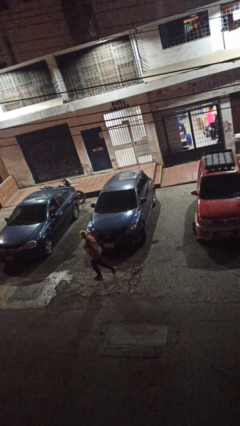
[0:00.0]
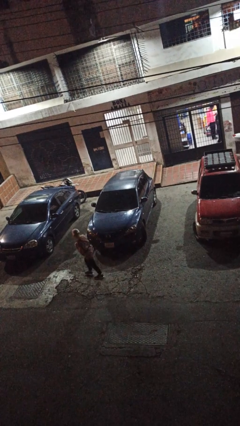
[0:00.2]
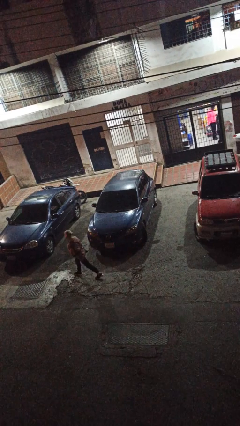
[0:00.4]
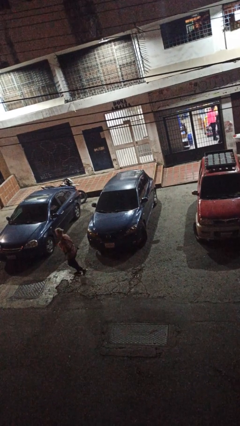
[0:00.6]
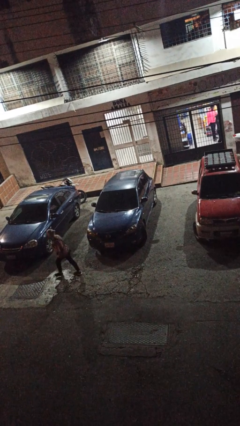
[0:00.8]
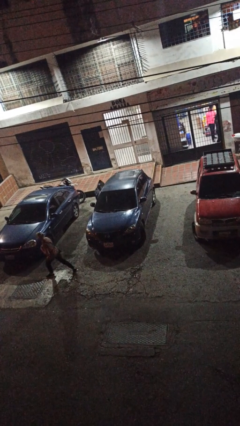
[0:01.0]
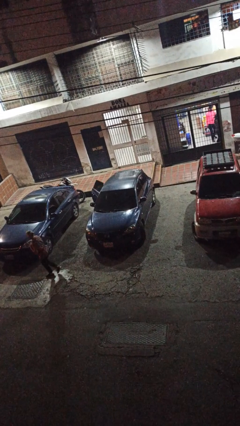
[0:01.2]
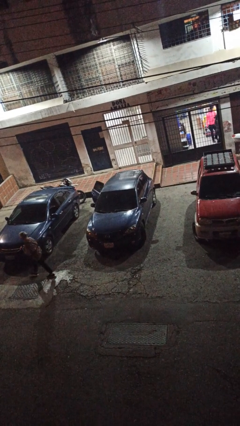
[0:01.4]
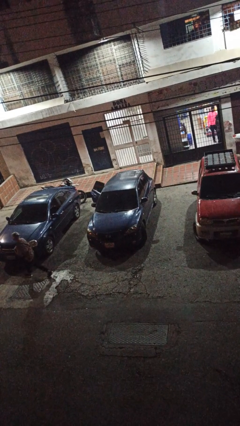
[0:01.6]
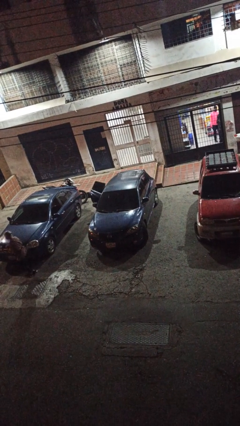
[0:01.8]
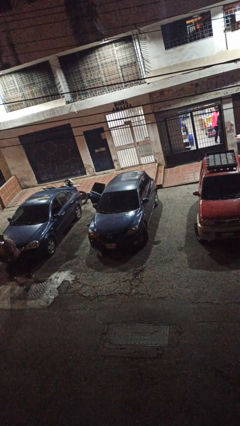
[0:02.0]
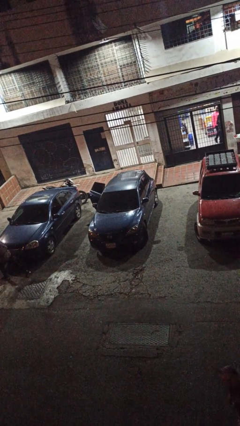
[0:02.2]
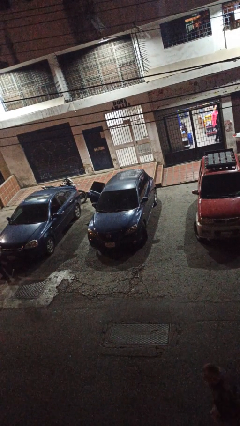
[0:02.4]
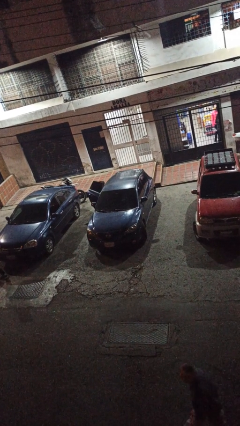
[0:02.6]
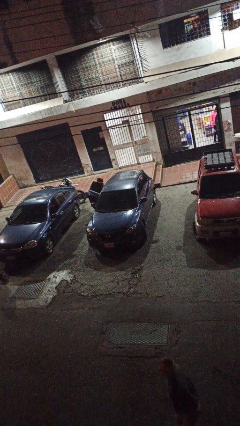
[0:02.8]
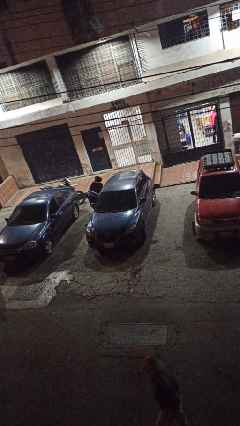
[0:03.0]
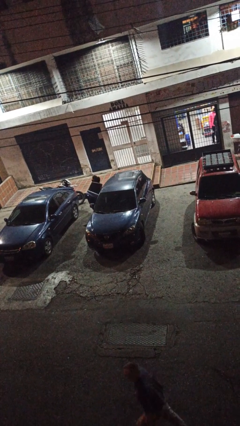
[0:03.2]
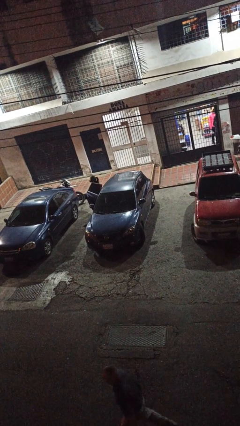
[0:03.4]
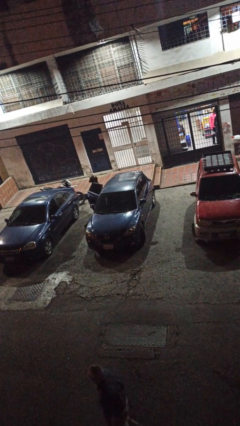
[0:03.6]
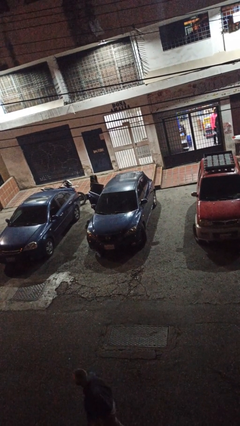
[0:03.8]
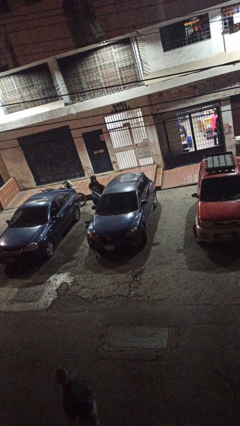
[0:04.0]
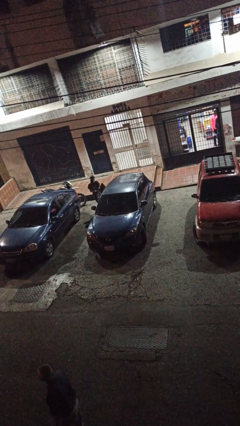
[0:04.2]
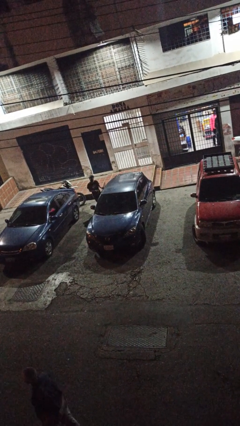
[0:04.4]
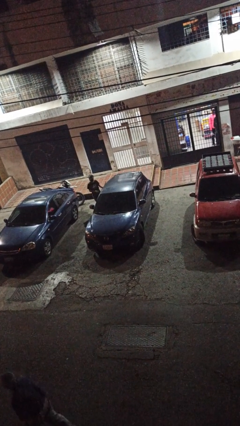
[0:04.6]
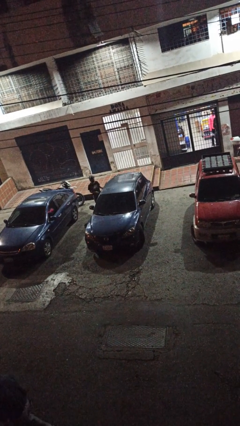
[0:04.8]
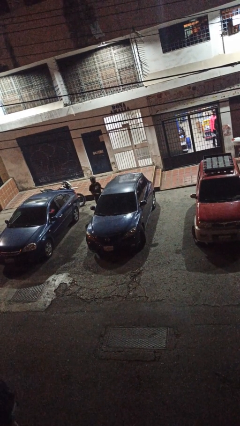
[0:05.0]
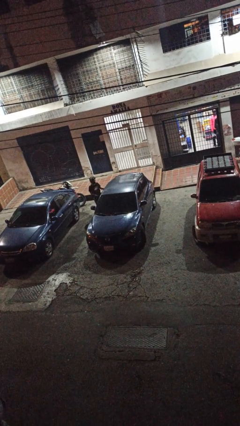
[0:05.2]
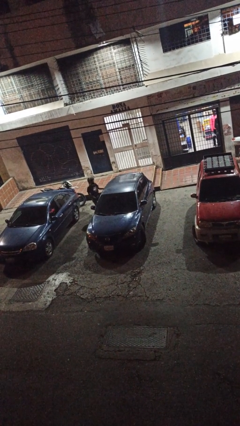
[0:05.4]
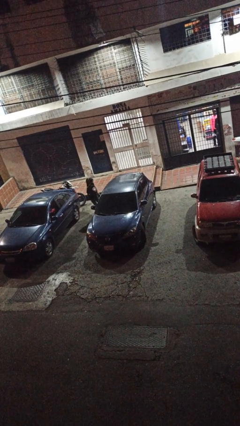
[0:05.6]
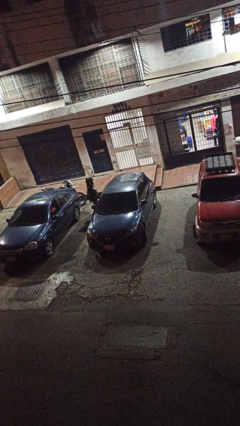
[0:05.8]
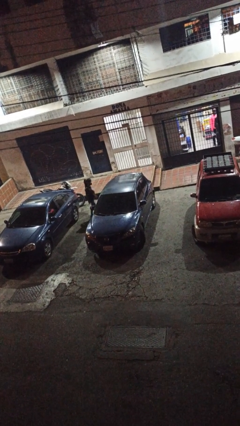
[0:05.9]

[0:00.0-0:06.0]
car drops off person

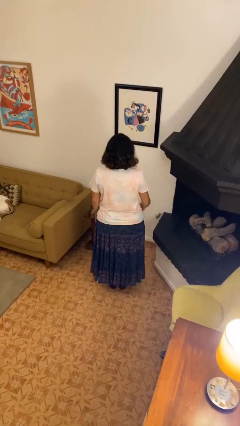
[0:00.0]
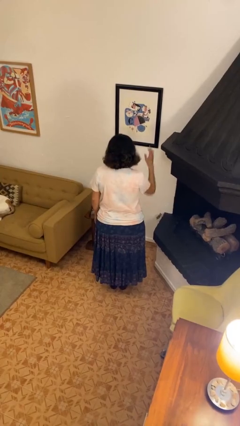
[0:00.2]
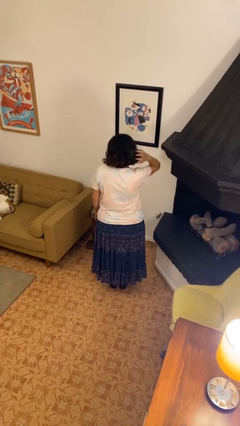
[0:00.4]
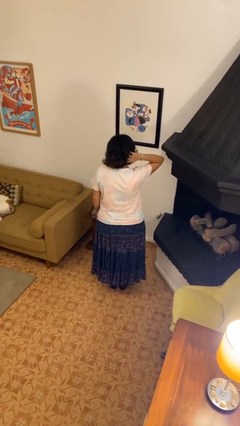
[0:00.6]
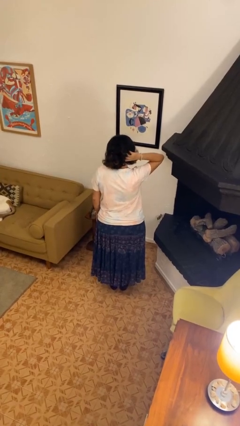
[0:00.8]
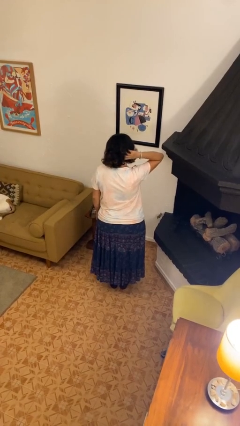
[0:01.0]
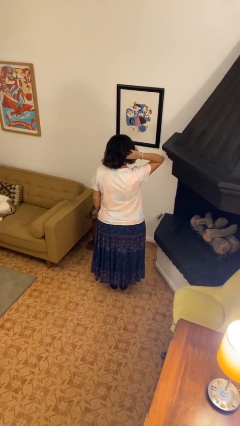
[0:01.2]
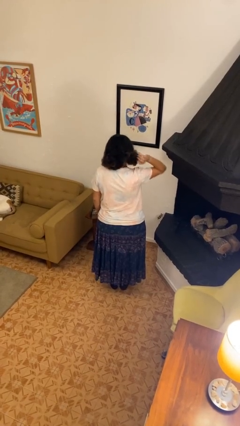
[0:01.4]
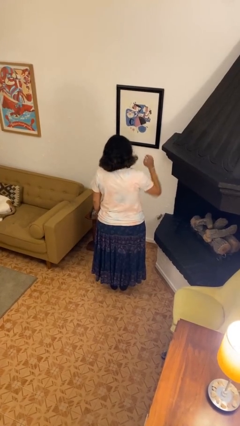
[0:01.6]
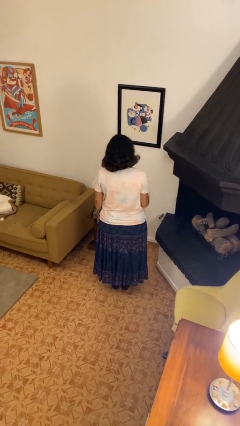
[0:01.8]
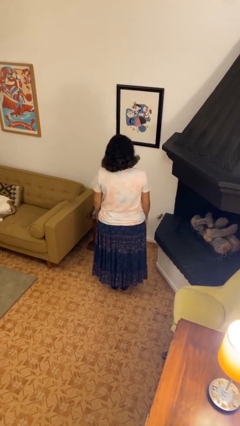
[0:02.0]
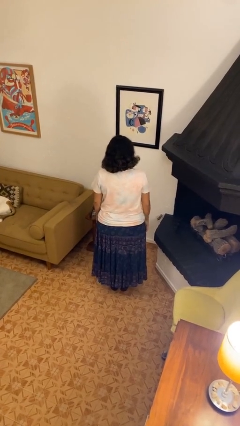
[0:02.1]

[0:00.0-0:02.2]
person scratches face

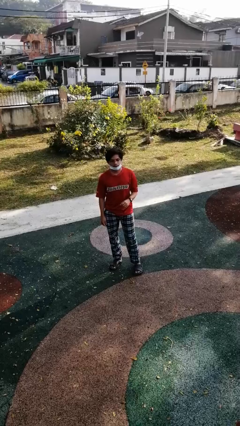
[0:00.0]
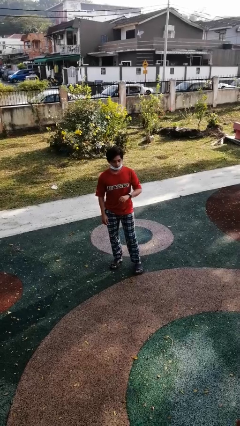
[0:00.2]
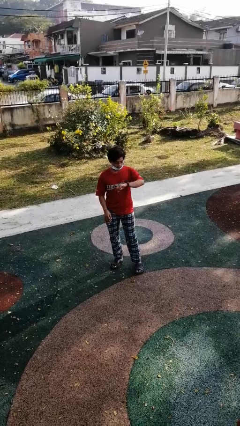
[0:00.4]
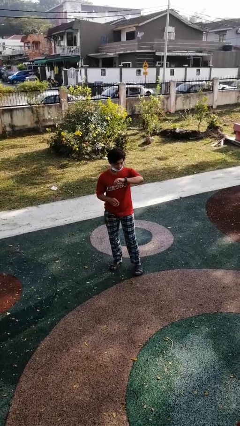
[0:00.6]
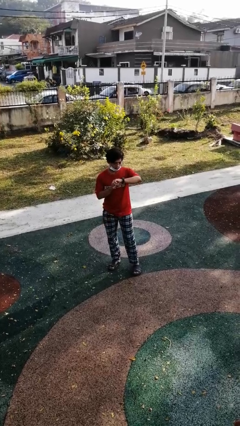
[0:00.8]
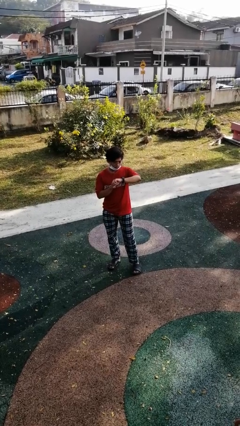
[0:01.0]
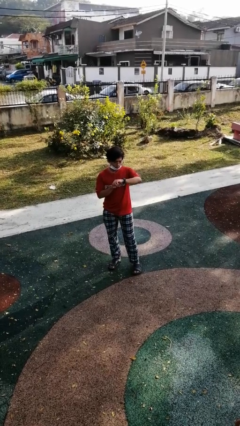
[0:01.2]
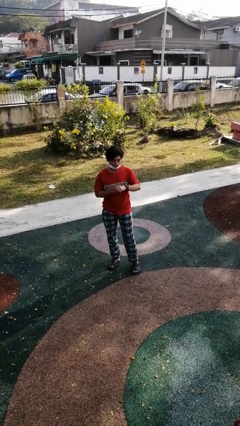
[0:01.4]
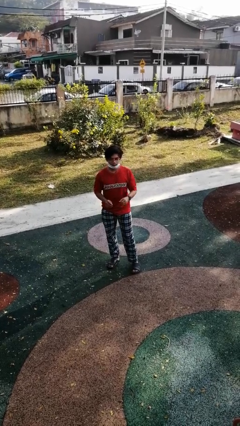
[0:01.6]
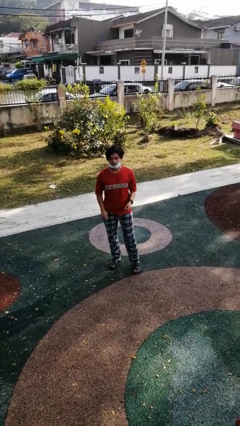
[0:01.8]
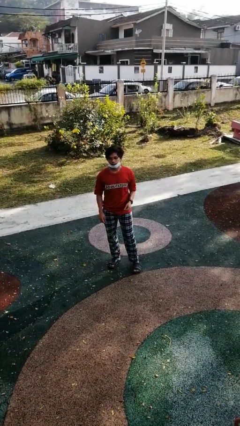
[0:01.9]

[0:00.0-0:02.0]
person looks at wristwatch

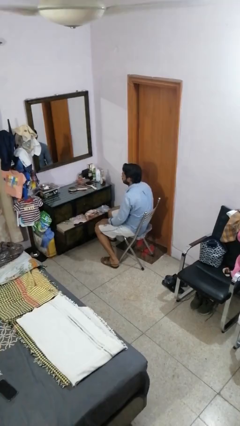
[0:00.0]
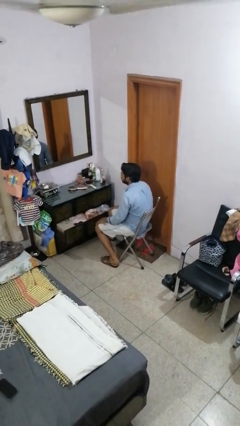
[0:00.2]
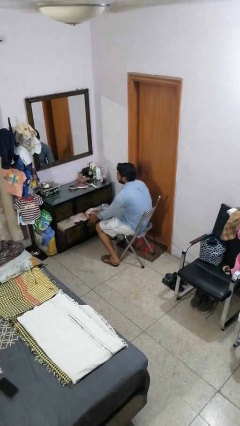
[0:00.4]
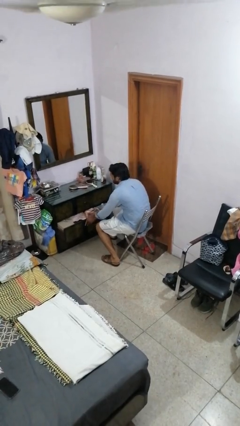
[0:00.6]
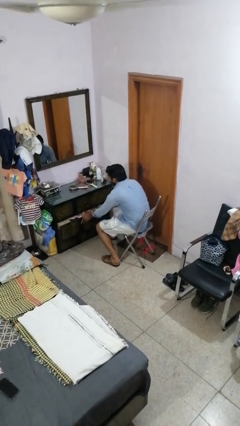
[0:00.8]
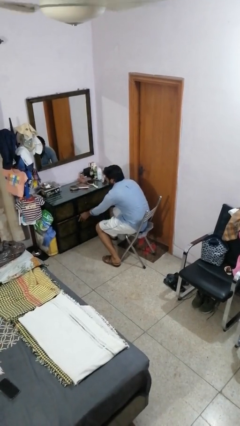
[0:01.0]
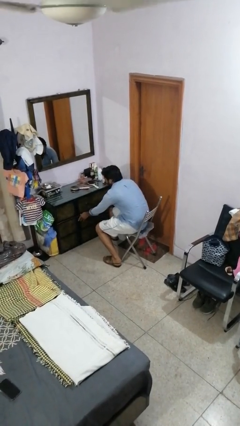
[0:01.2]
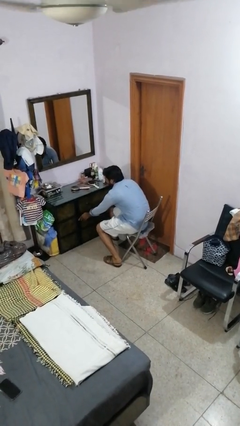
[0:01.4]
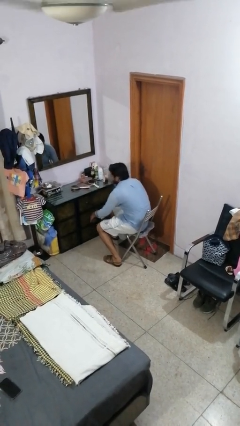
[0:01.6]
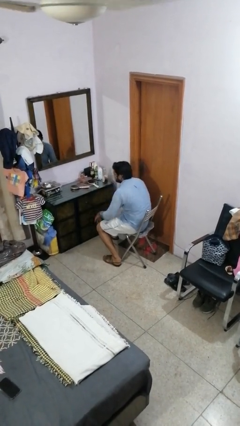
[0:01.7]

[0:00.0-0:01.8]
person closes dresser drawer

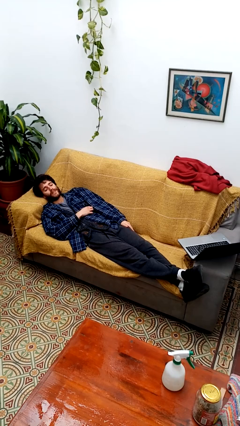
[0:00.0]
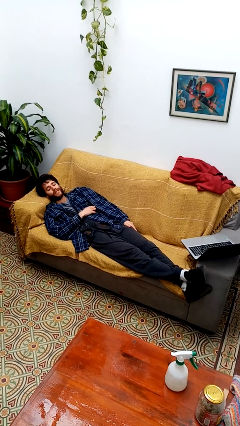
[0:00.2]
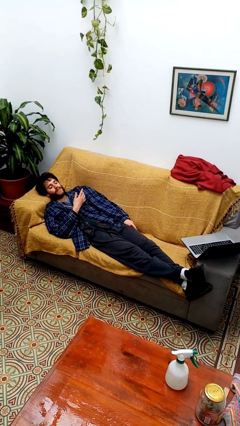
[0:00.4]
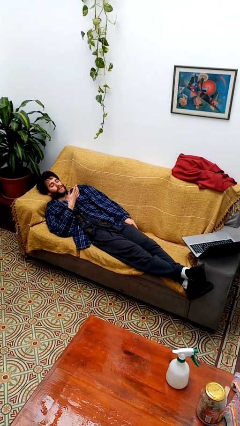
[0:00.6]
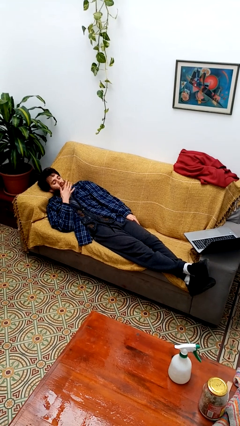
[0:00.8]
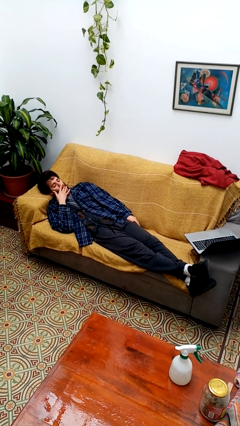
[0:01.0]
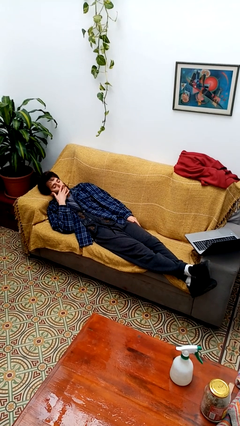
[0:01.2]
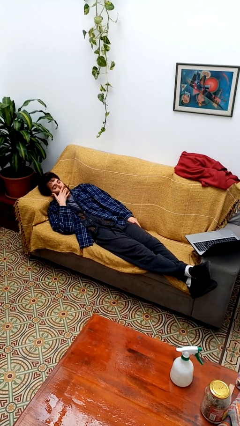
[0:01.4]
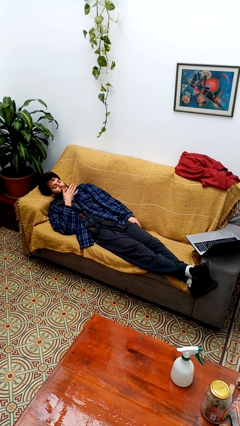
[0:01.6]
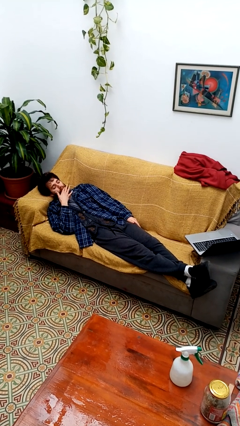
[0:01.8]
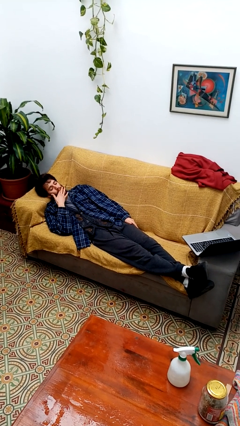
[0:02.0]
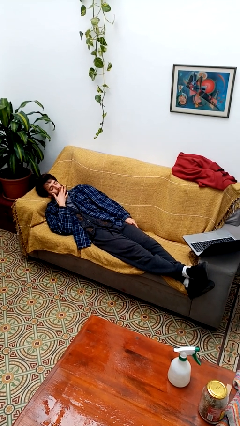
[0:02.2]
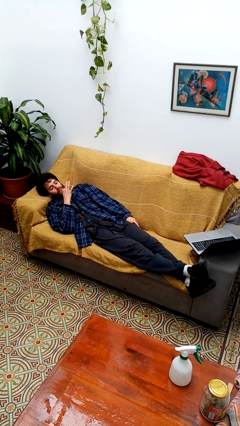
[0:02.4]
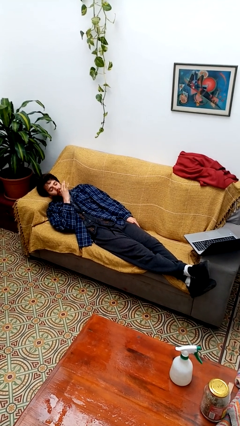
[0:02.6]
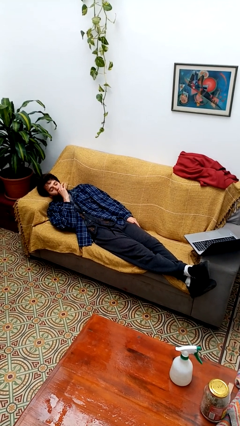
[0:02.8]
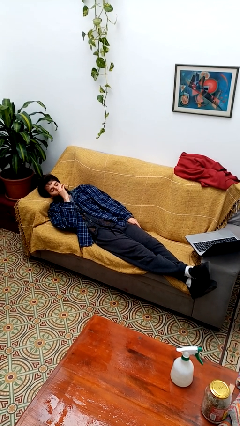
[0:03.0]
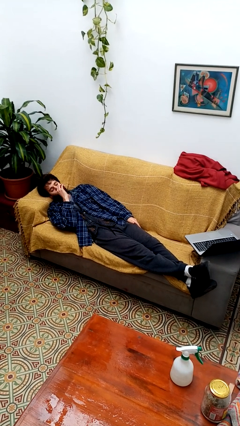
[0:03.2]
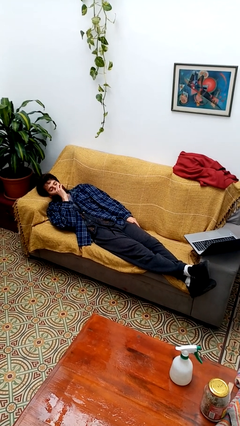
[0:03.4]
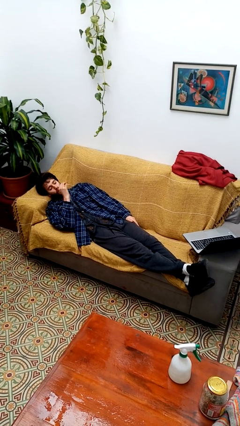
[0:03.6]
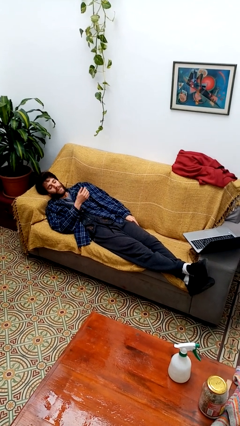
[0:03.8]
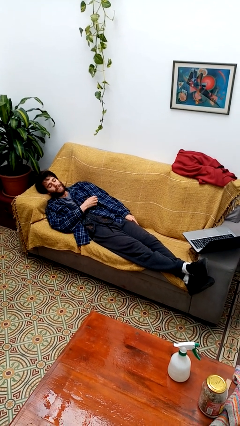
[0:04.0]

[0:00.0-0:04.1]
person licks fingers

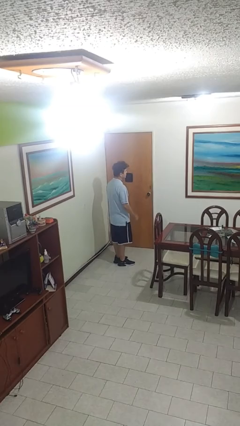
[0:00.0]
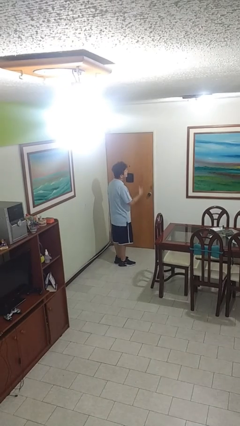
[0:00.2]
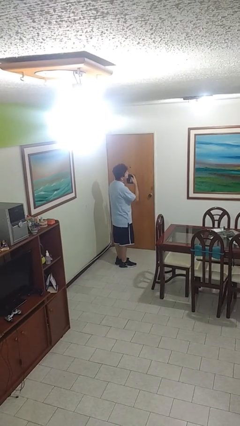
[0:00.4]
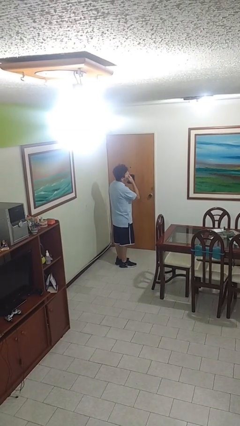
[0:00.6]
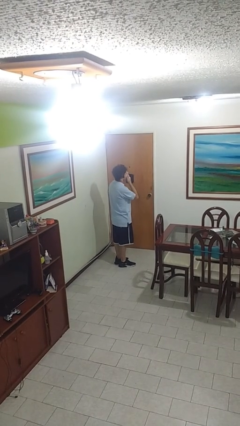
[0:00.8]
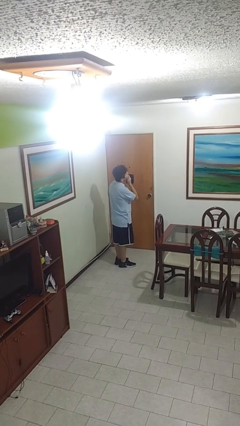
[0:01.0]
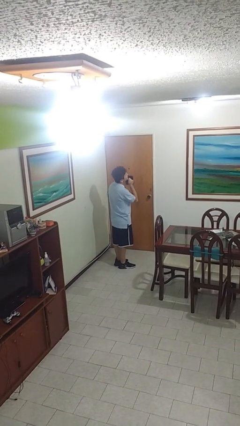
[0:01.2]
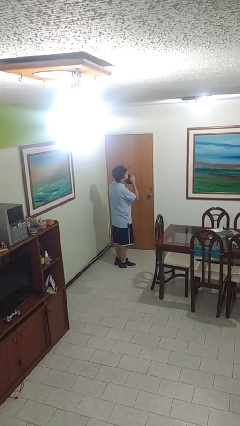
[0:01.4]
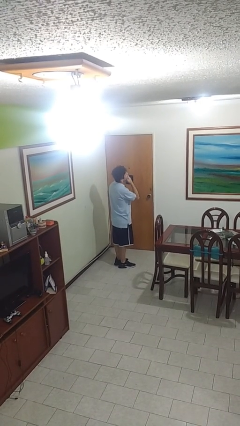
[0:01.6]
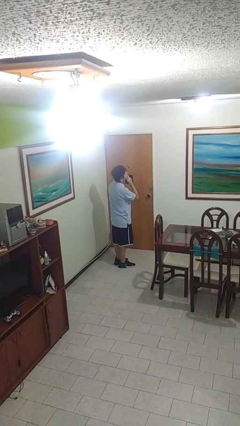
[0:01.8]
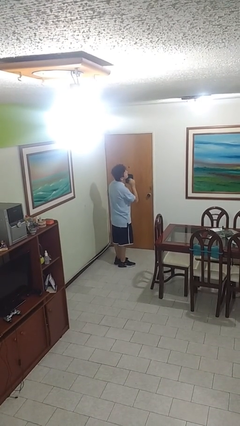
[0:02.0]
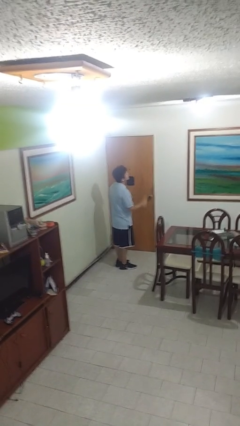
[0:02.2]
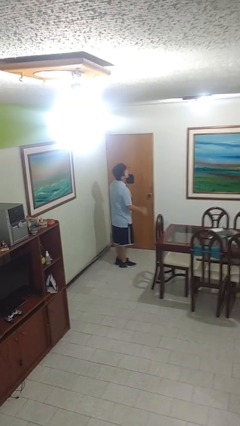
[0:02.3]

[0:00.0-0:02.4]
person strokes chin
